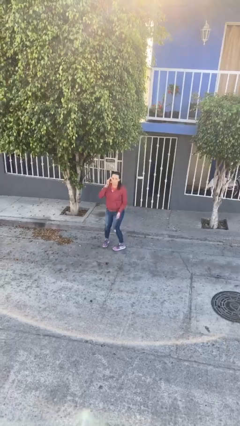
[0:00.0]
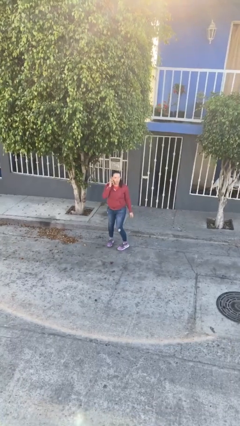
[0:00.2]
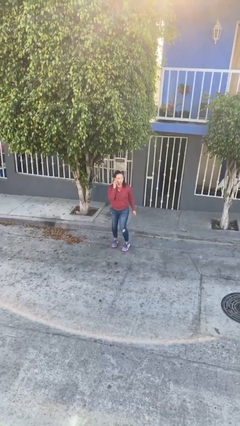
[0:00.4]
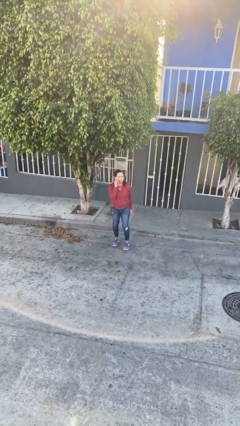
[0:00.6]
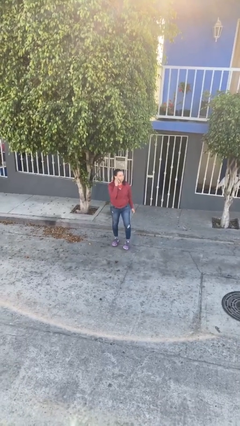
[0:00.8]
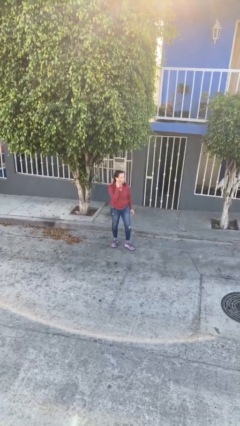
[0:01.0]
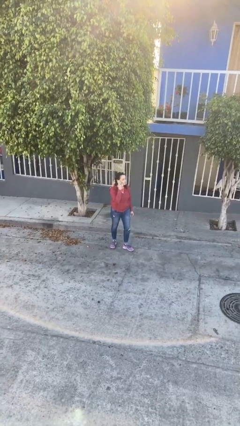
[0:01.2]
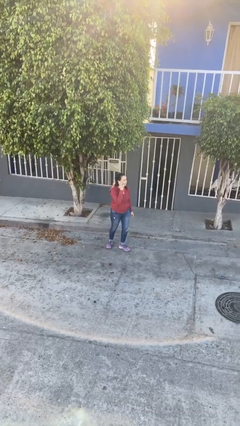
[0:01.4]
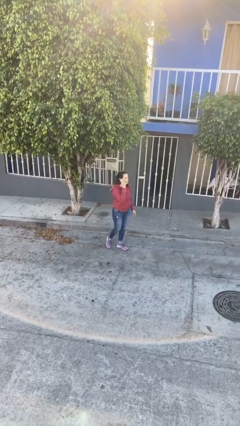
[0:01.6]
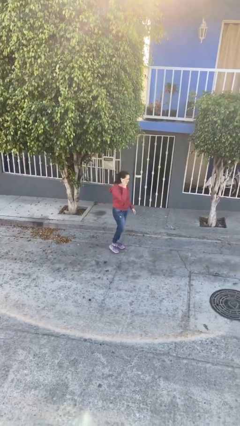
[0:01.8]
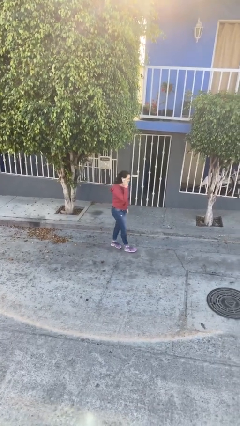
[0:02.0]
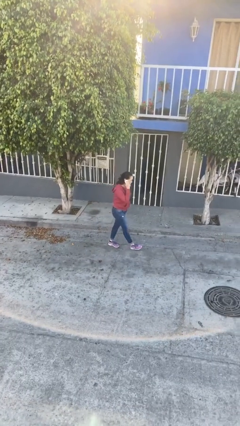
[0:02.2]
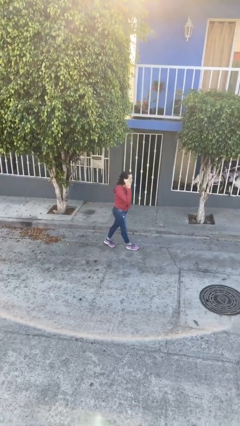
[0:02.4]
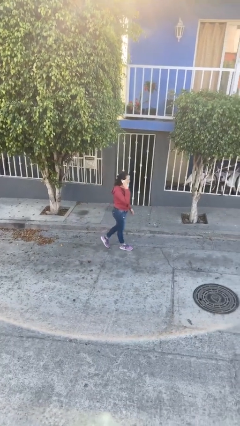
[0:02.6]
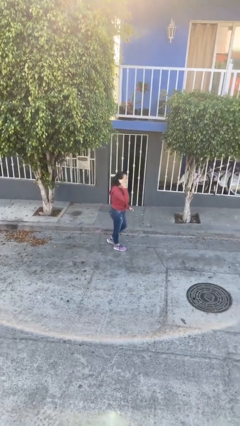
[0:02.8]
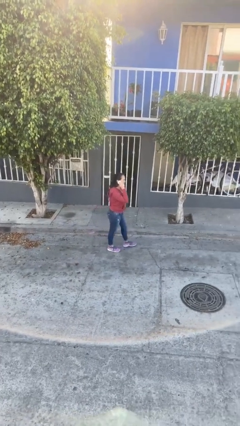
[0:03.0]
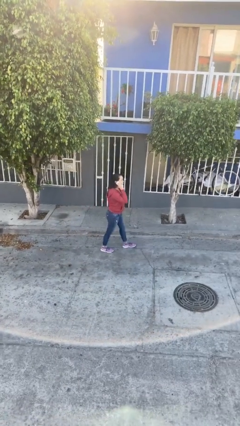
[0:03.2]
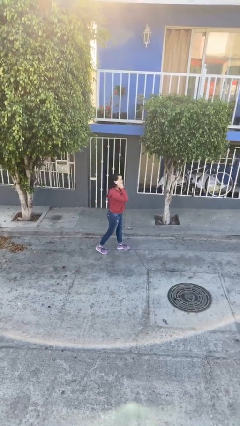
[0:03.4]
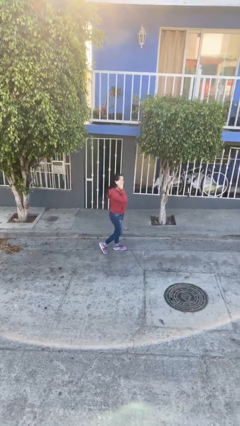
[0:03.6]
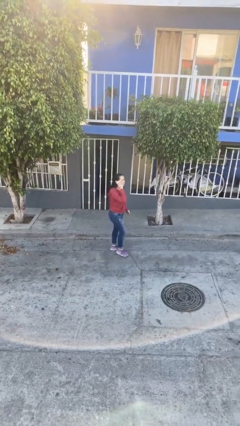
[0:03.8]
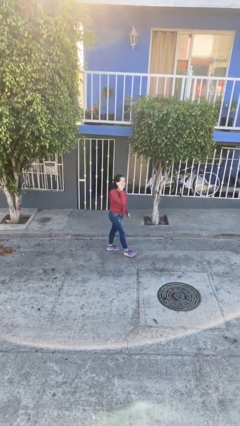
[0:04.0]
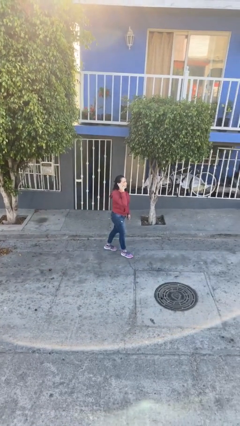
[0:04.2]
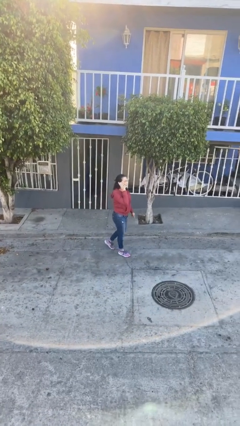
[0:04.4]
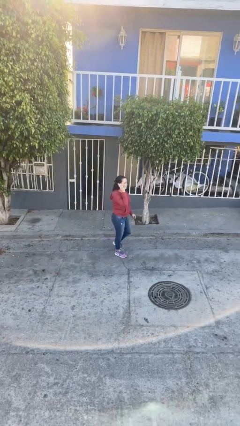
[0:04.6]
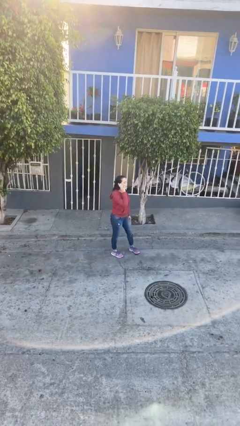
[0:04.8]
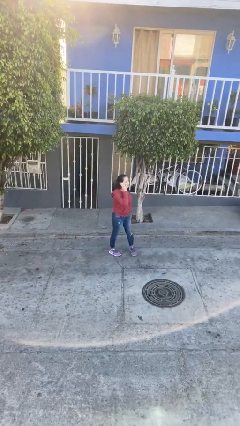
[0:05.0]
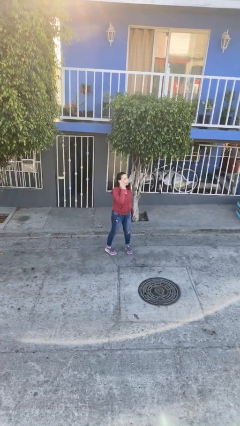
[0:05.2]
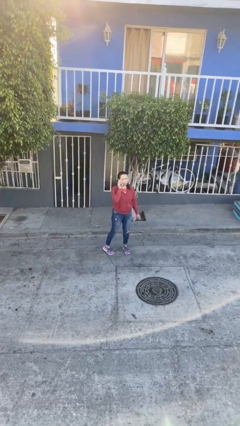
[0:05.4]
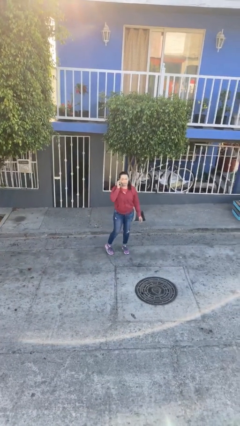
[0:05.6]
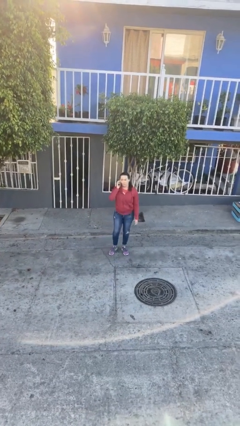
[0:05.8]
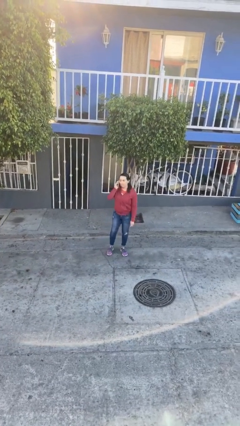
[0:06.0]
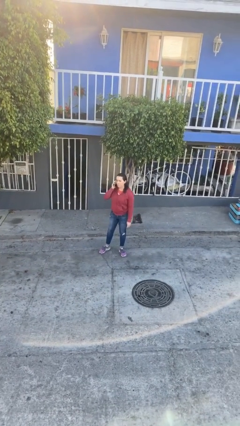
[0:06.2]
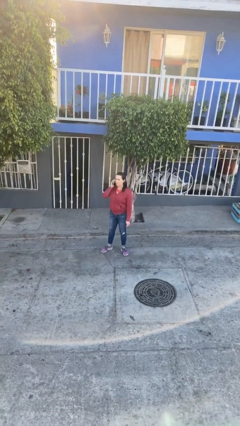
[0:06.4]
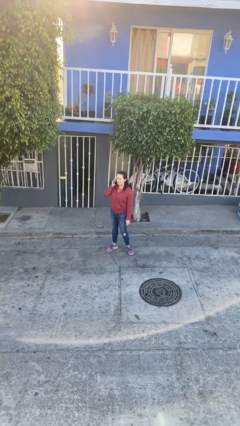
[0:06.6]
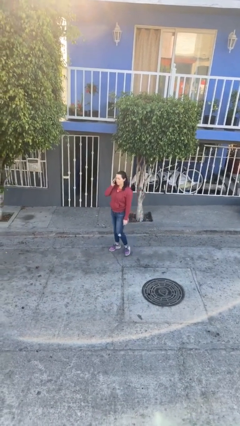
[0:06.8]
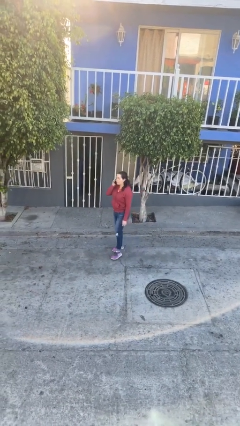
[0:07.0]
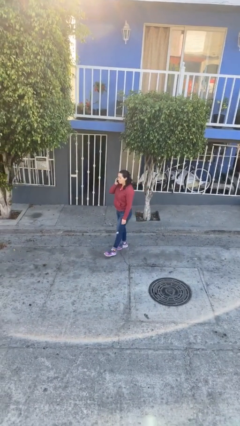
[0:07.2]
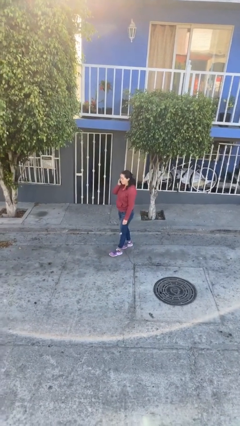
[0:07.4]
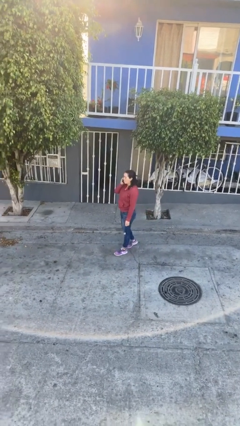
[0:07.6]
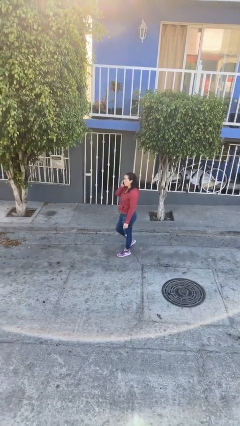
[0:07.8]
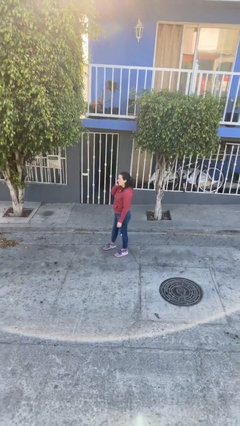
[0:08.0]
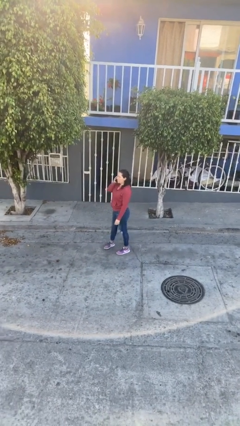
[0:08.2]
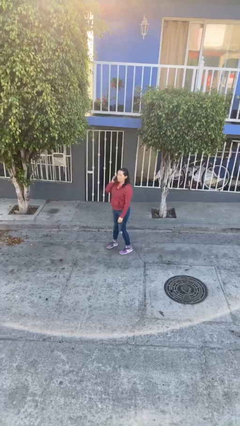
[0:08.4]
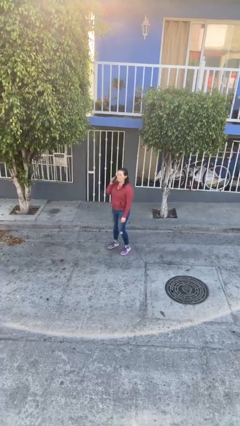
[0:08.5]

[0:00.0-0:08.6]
person talks on phone

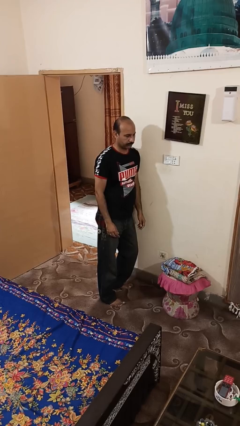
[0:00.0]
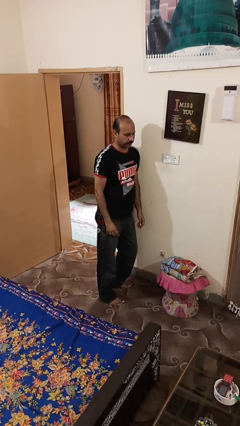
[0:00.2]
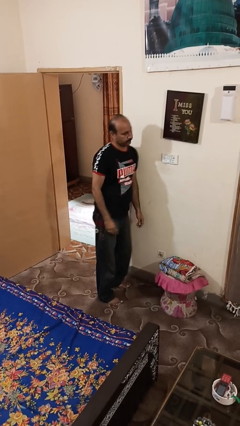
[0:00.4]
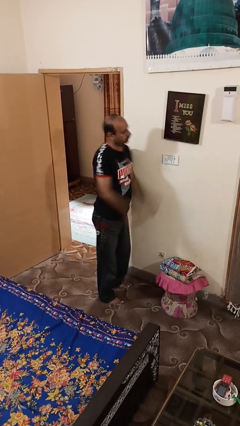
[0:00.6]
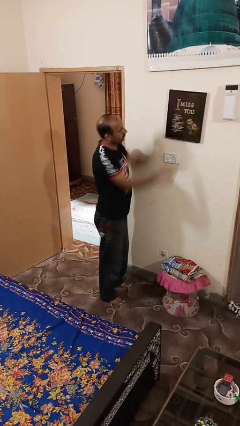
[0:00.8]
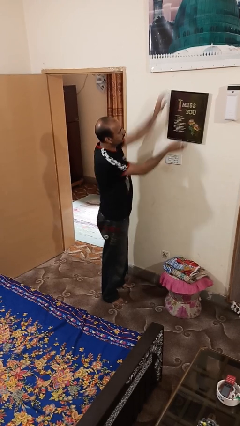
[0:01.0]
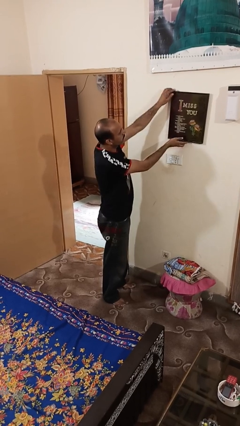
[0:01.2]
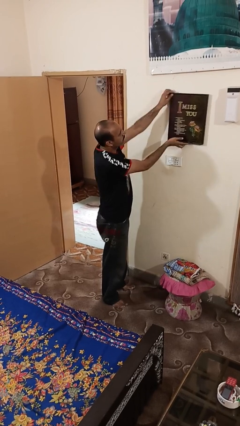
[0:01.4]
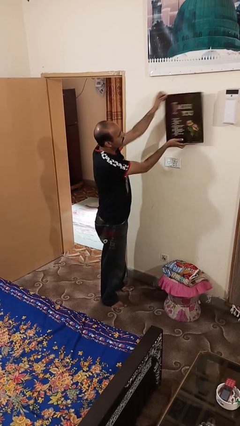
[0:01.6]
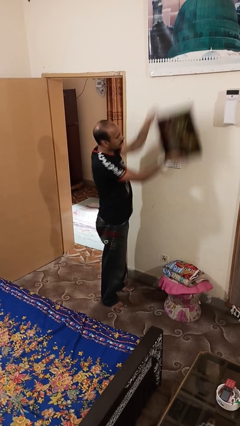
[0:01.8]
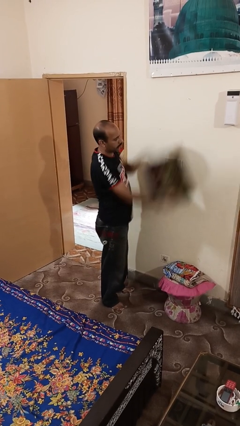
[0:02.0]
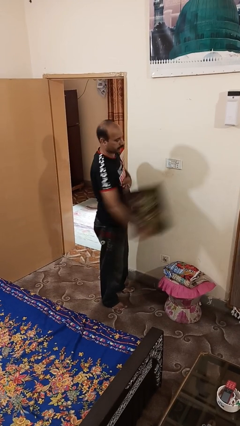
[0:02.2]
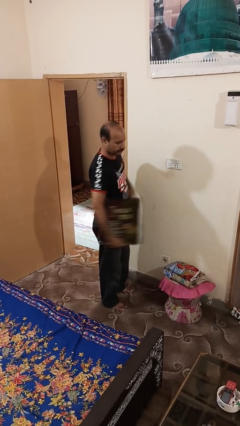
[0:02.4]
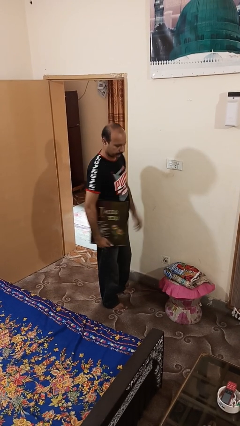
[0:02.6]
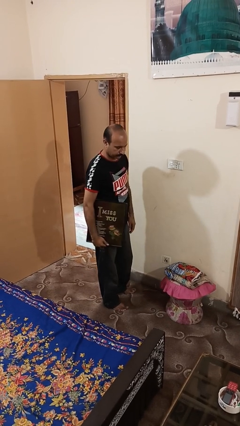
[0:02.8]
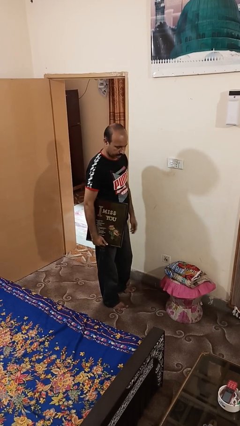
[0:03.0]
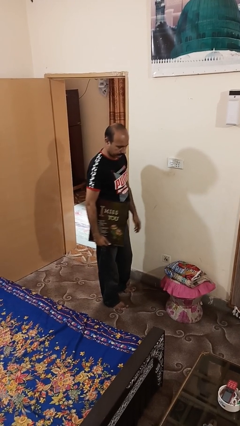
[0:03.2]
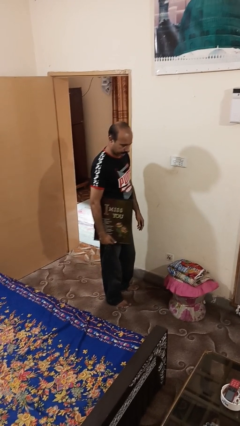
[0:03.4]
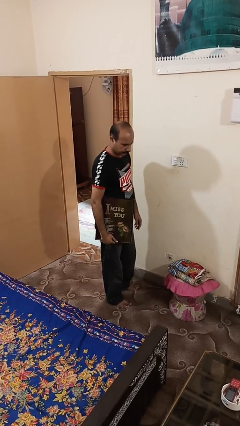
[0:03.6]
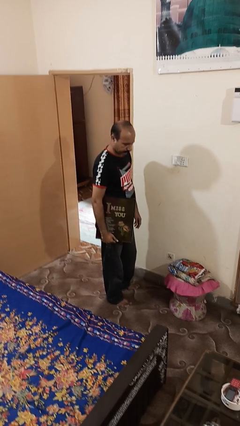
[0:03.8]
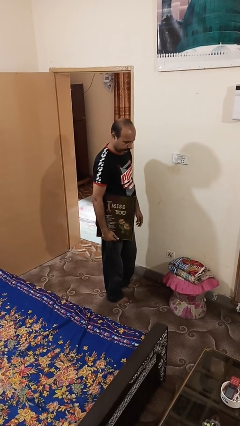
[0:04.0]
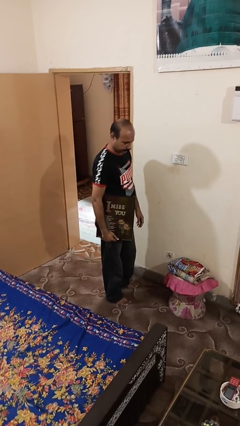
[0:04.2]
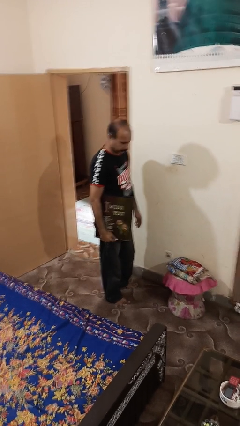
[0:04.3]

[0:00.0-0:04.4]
person takes down picture frame

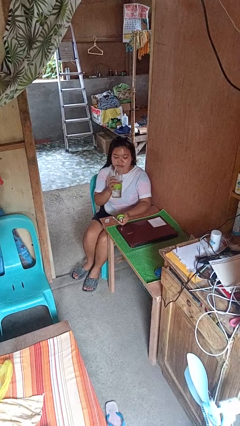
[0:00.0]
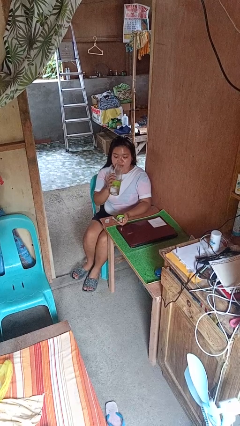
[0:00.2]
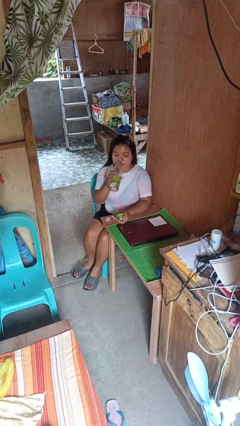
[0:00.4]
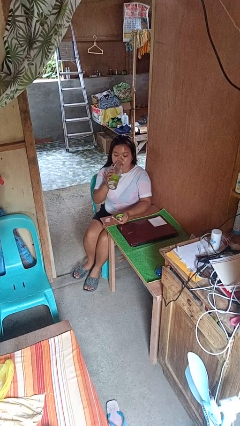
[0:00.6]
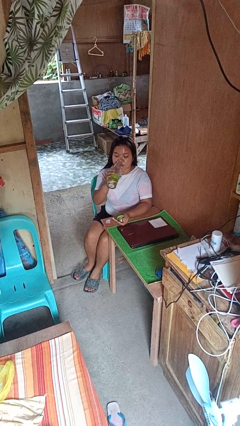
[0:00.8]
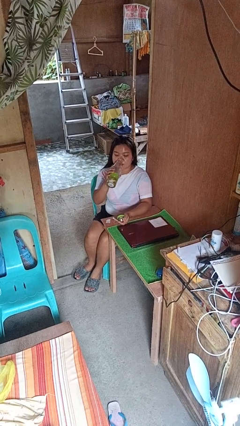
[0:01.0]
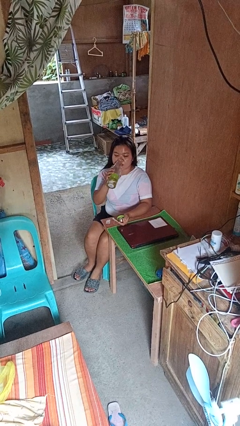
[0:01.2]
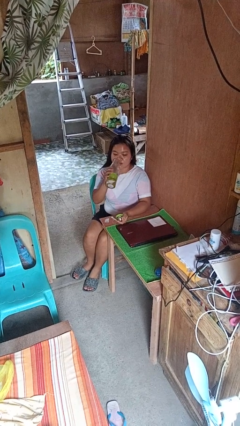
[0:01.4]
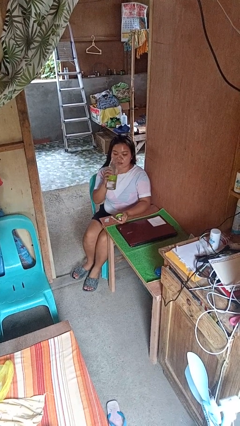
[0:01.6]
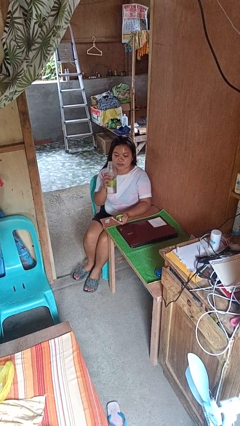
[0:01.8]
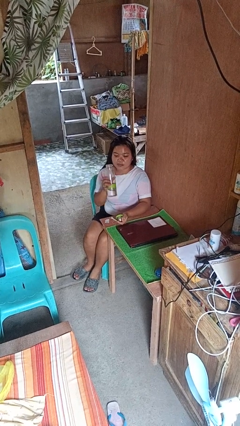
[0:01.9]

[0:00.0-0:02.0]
person drinks from bottle

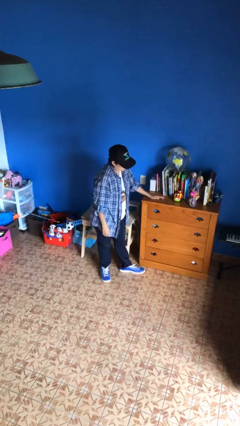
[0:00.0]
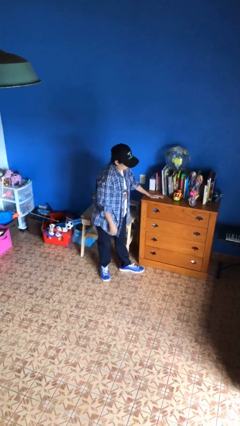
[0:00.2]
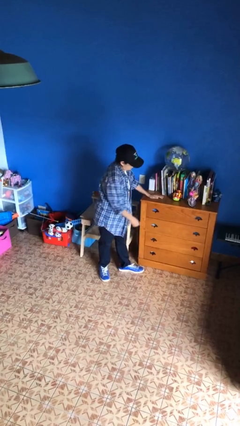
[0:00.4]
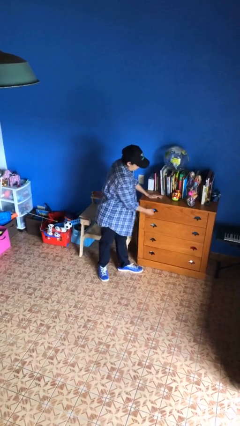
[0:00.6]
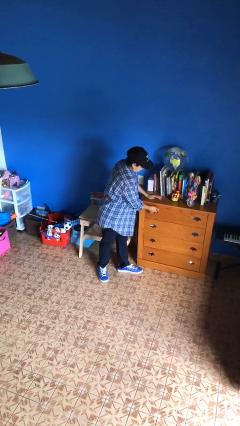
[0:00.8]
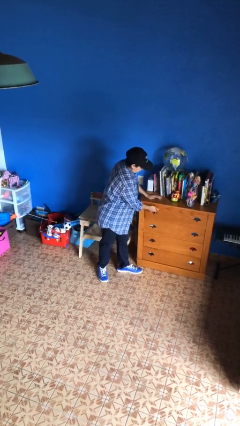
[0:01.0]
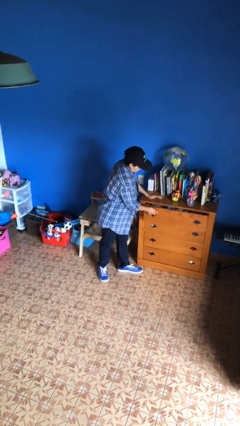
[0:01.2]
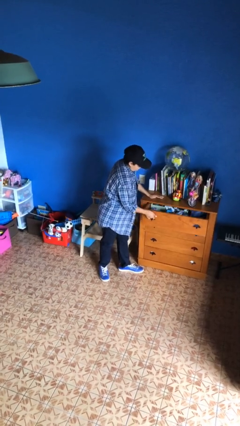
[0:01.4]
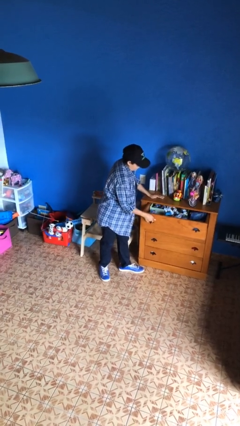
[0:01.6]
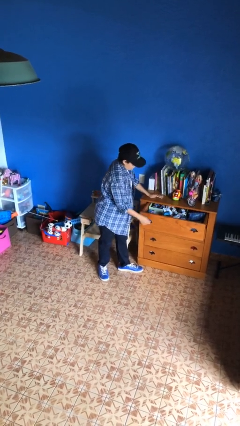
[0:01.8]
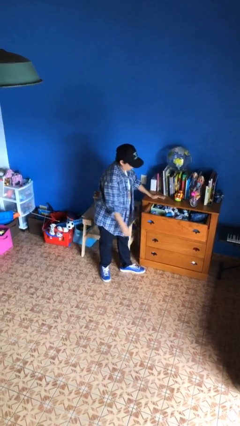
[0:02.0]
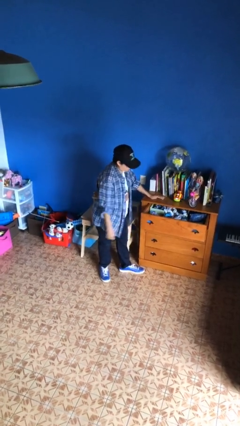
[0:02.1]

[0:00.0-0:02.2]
person opens dresser drawer

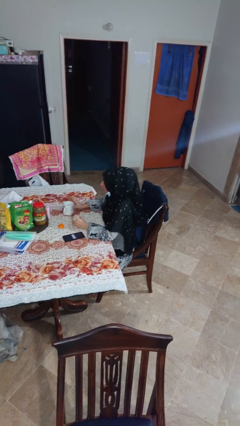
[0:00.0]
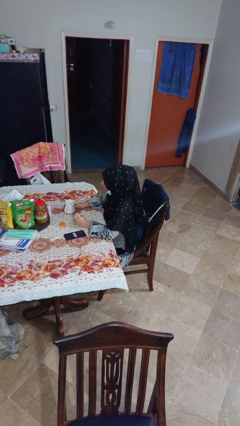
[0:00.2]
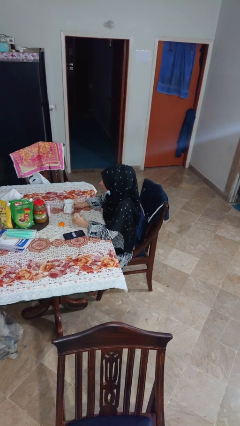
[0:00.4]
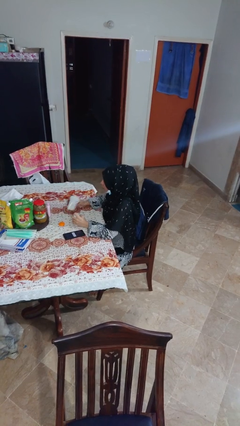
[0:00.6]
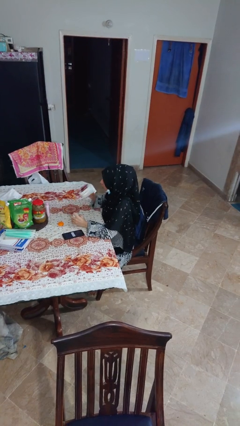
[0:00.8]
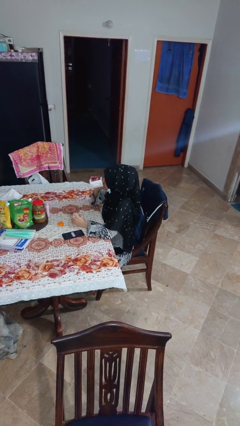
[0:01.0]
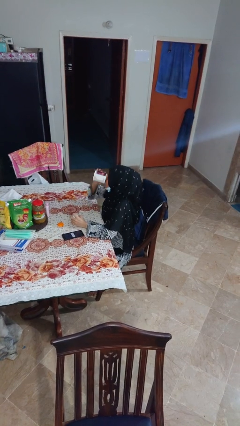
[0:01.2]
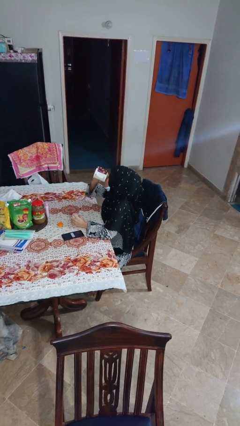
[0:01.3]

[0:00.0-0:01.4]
person drinks from cup
